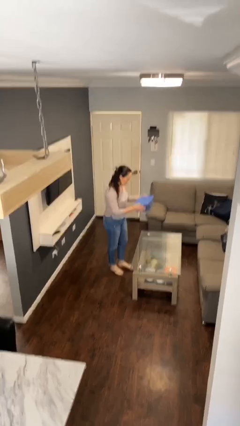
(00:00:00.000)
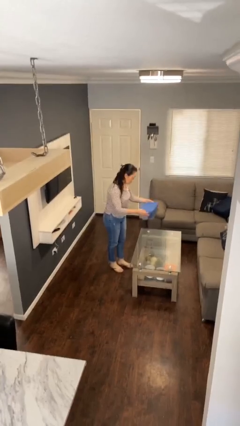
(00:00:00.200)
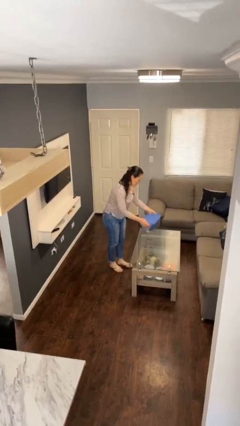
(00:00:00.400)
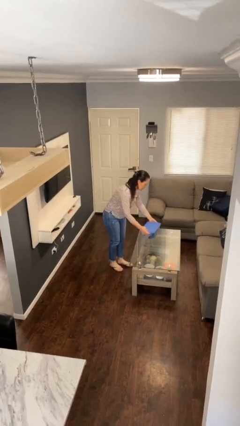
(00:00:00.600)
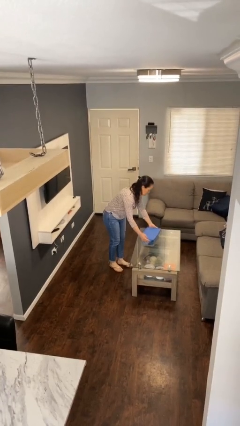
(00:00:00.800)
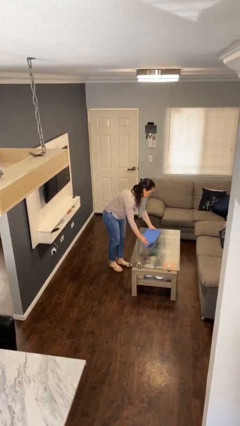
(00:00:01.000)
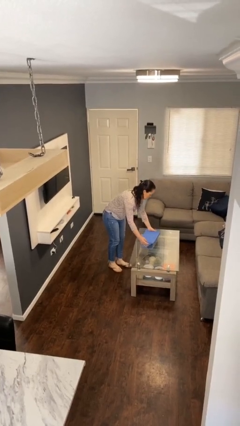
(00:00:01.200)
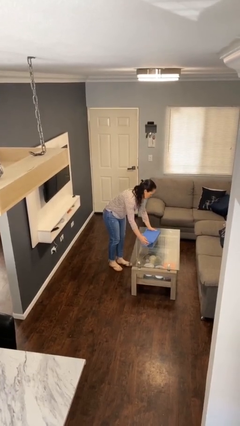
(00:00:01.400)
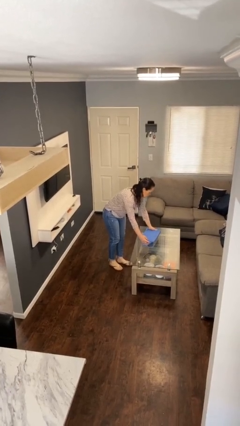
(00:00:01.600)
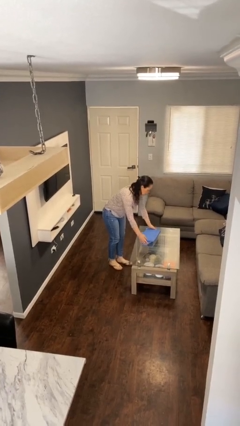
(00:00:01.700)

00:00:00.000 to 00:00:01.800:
person puts down object on table

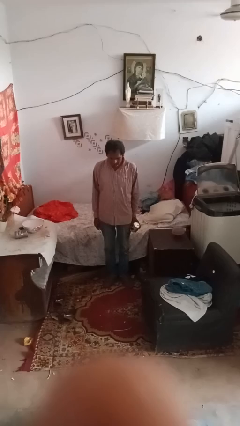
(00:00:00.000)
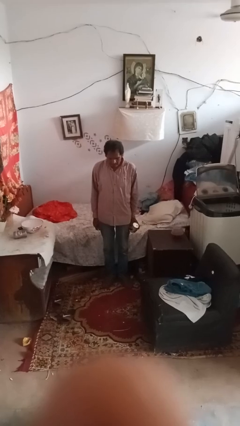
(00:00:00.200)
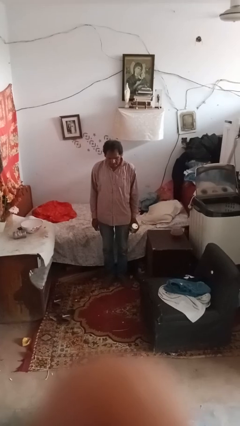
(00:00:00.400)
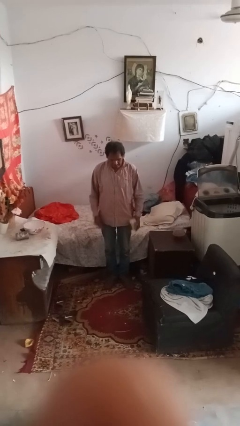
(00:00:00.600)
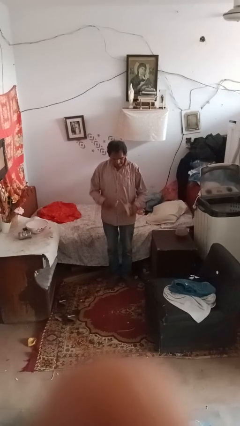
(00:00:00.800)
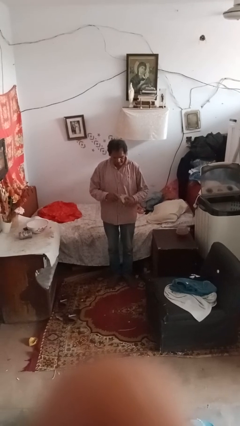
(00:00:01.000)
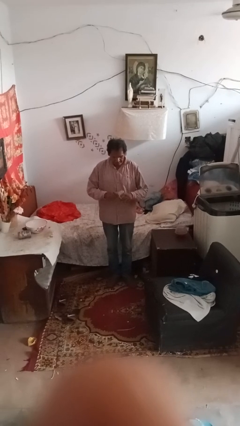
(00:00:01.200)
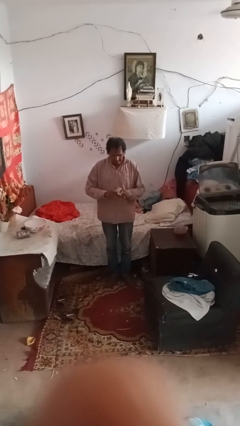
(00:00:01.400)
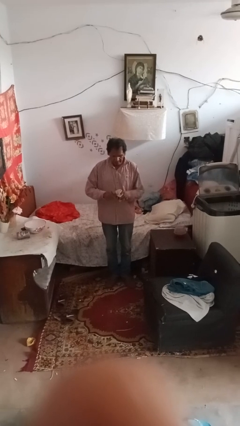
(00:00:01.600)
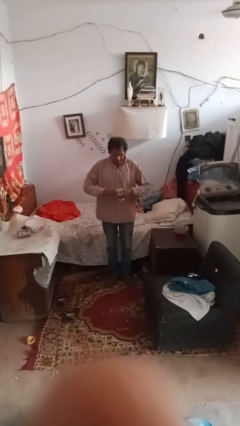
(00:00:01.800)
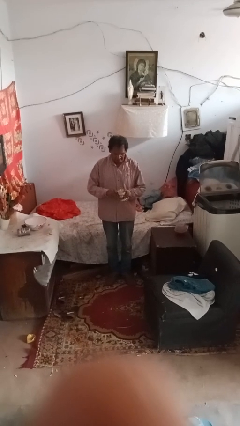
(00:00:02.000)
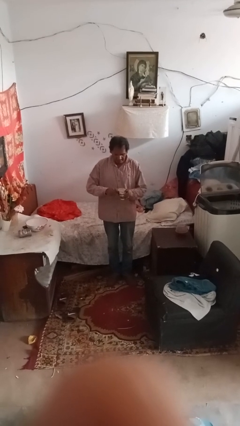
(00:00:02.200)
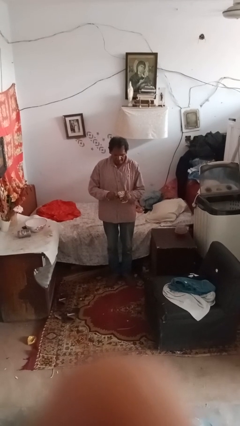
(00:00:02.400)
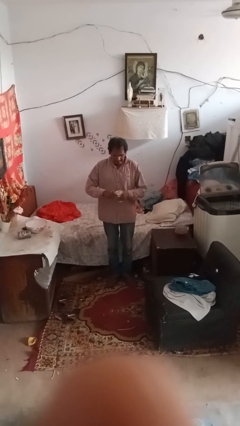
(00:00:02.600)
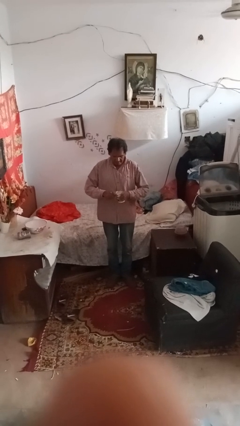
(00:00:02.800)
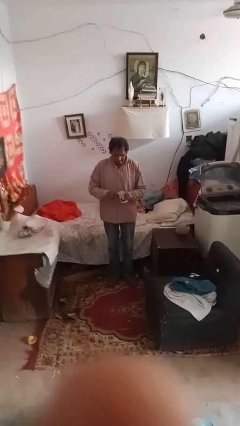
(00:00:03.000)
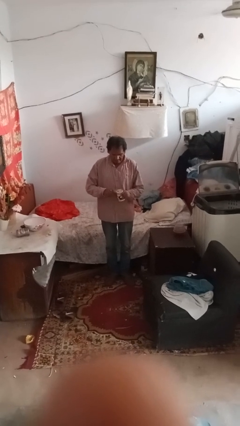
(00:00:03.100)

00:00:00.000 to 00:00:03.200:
person opens can with can opener

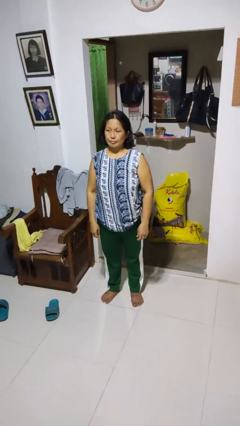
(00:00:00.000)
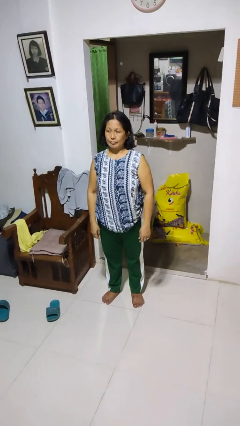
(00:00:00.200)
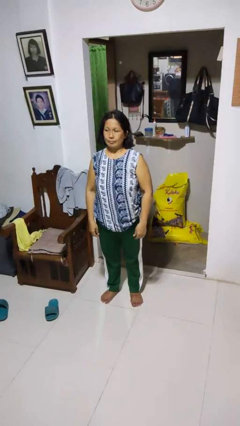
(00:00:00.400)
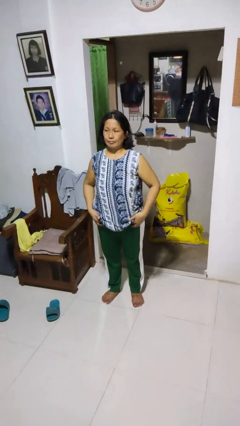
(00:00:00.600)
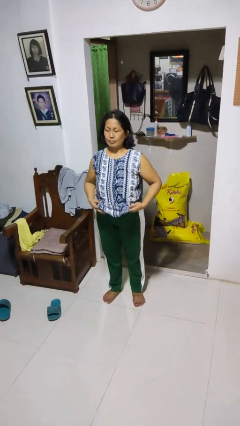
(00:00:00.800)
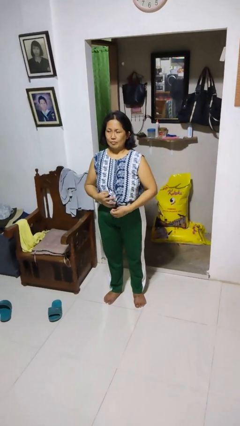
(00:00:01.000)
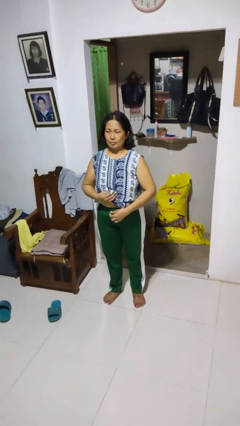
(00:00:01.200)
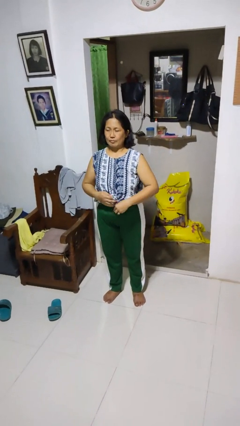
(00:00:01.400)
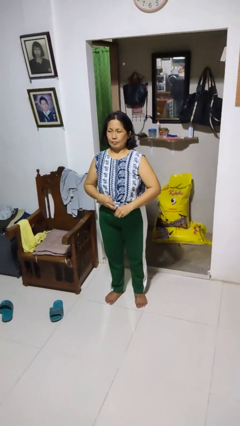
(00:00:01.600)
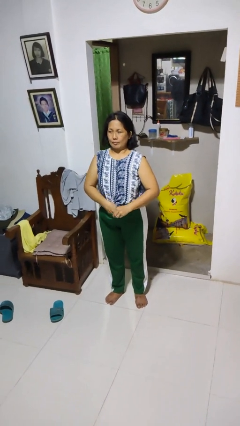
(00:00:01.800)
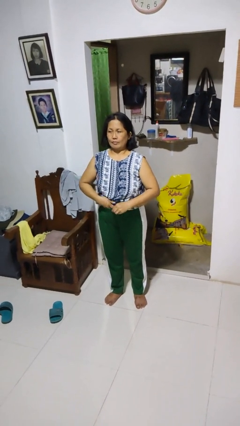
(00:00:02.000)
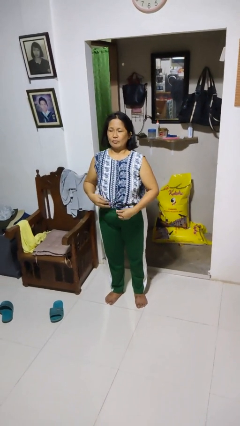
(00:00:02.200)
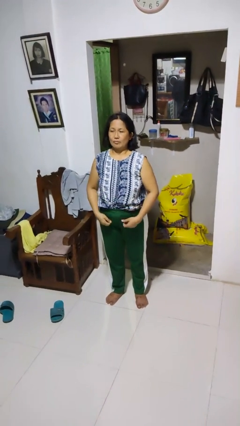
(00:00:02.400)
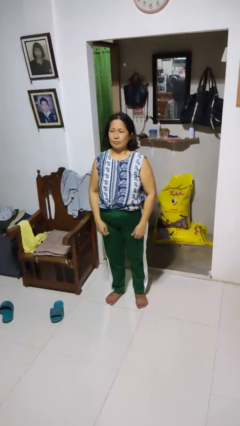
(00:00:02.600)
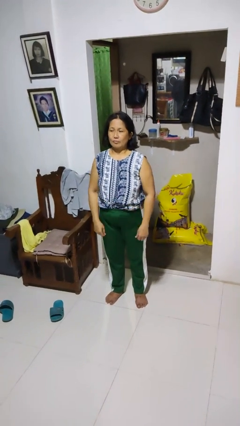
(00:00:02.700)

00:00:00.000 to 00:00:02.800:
person tucks in shirt

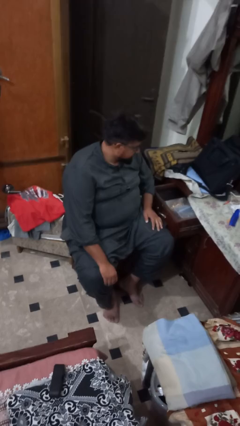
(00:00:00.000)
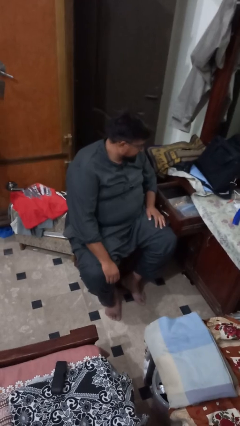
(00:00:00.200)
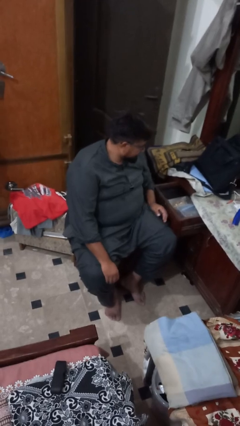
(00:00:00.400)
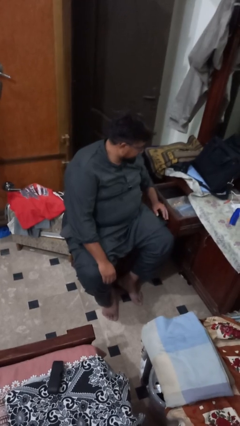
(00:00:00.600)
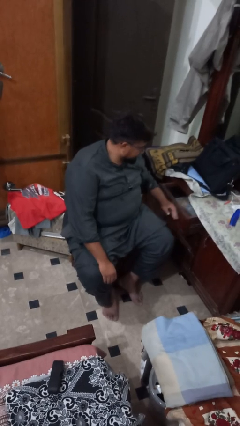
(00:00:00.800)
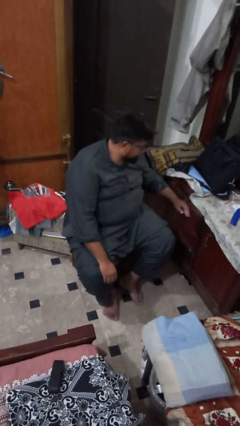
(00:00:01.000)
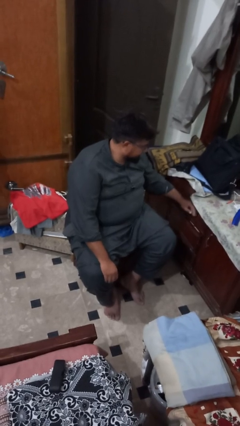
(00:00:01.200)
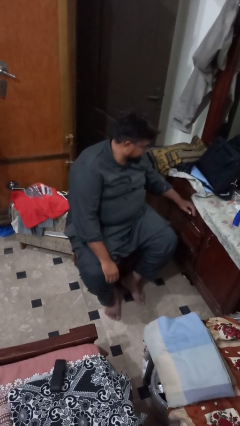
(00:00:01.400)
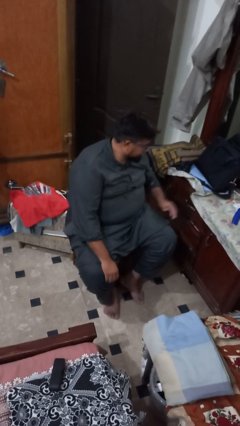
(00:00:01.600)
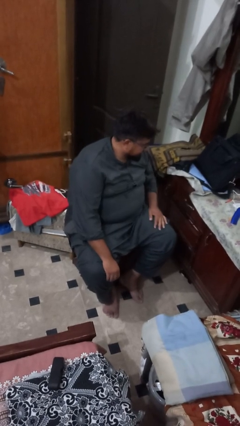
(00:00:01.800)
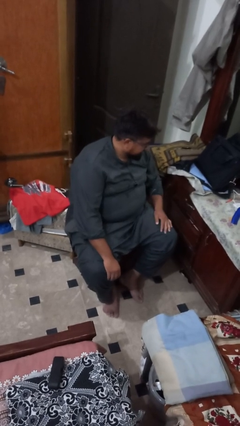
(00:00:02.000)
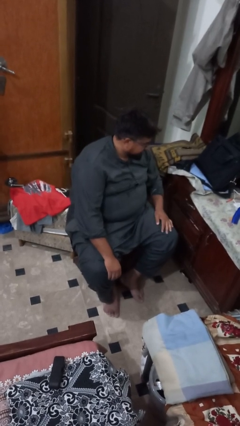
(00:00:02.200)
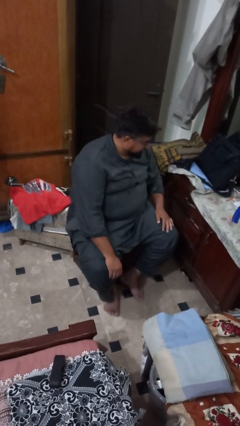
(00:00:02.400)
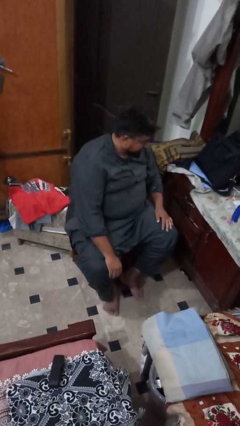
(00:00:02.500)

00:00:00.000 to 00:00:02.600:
person closes dresser drawer

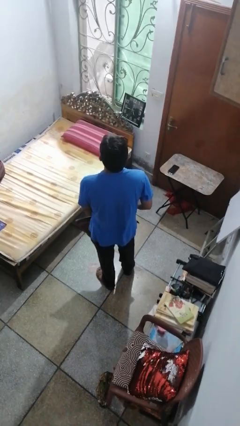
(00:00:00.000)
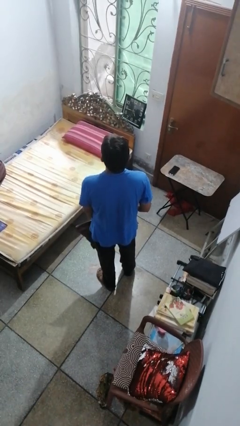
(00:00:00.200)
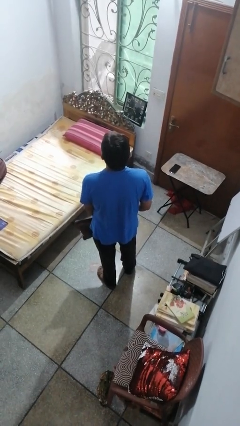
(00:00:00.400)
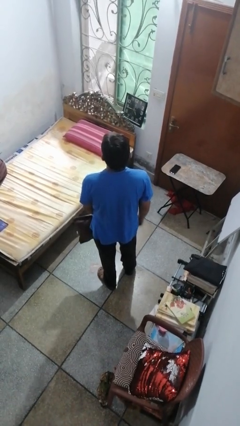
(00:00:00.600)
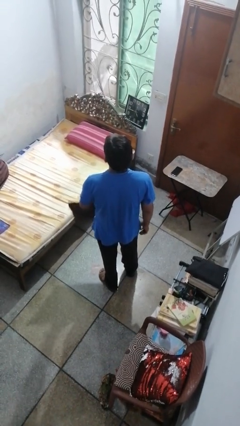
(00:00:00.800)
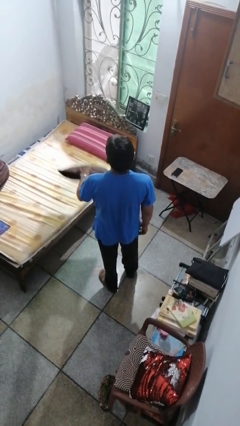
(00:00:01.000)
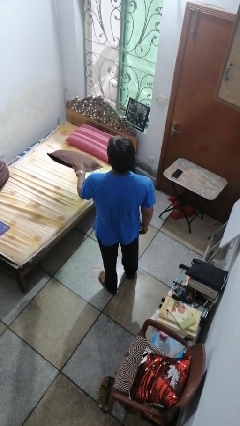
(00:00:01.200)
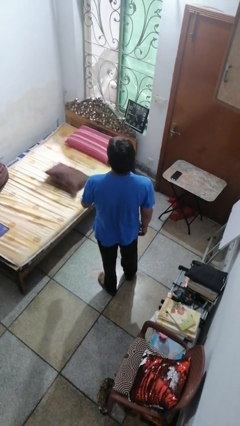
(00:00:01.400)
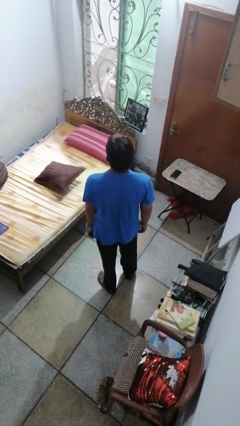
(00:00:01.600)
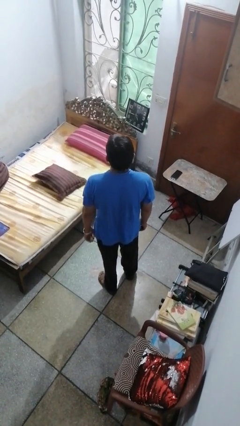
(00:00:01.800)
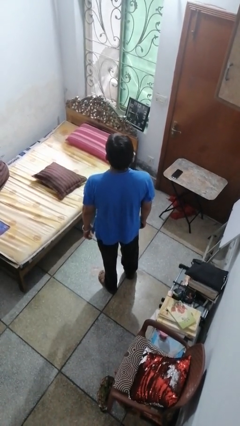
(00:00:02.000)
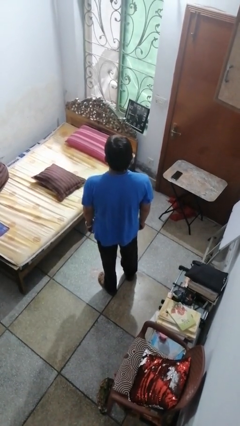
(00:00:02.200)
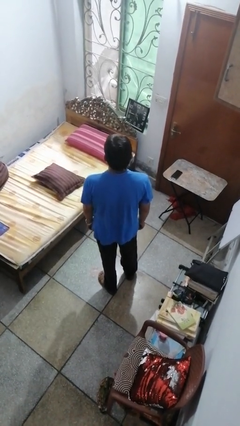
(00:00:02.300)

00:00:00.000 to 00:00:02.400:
person throws object on bed

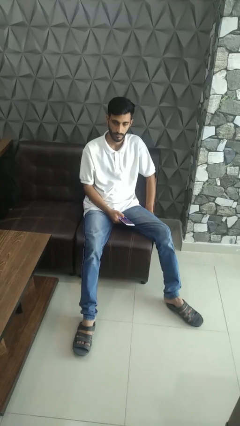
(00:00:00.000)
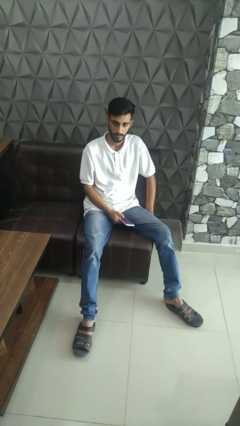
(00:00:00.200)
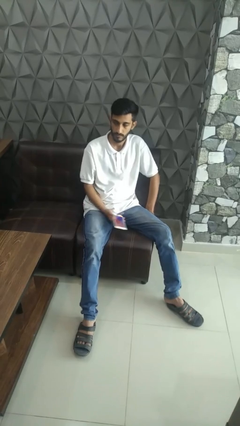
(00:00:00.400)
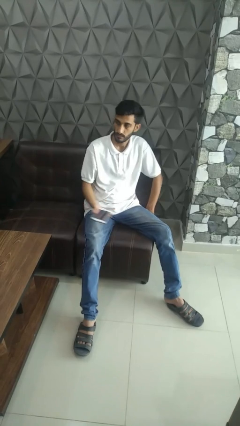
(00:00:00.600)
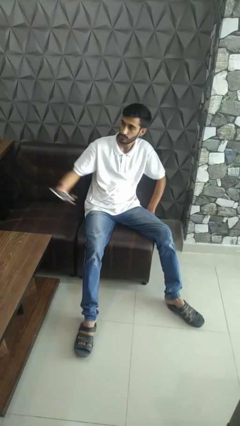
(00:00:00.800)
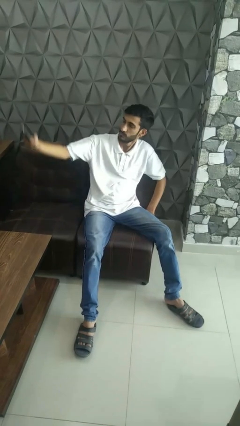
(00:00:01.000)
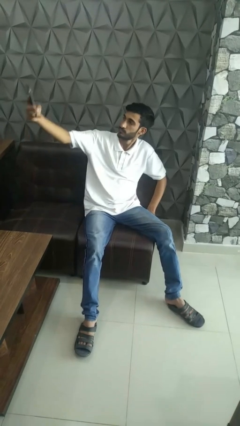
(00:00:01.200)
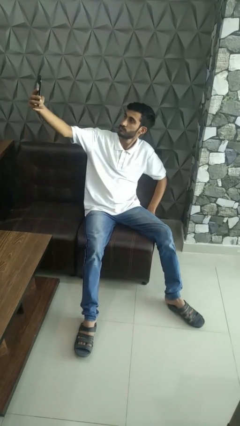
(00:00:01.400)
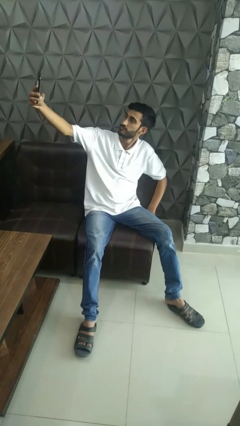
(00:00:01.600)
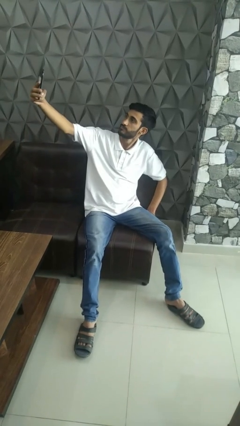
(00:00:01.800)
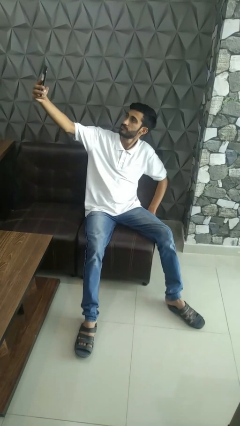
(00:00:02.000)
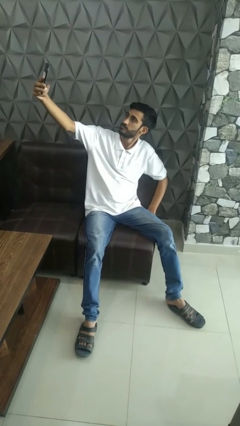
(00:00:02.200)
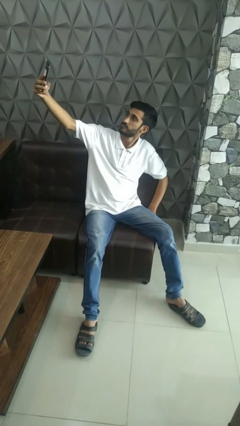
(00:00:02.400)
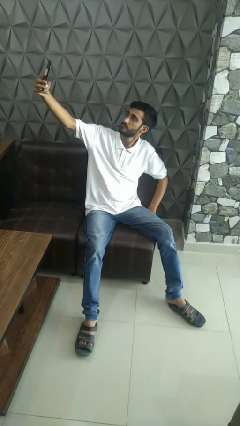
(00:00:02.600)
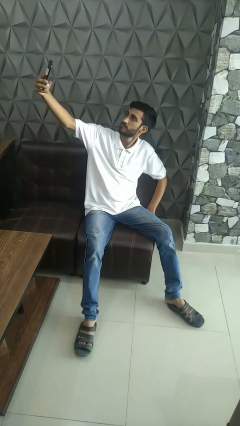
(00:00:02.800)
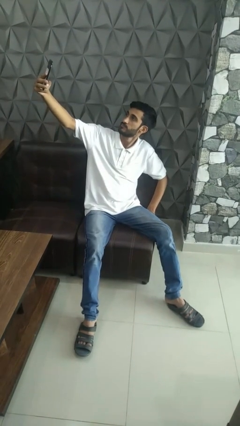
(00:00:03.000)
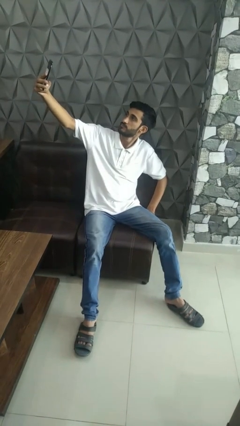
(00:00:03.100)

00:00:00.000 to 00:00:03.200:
person takes selfie

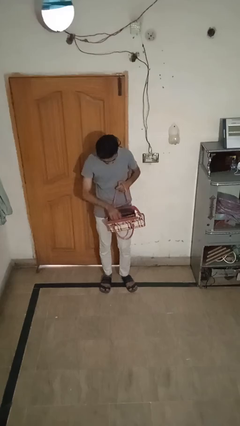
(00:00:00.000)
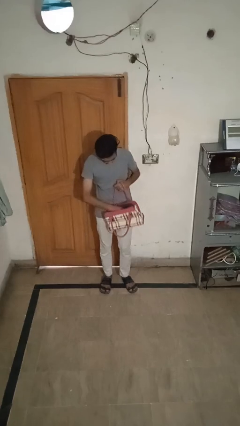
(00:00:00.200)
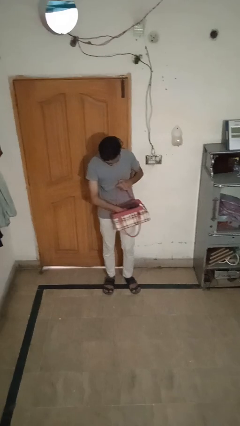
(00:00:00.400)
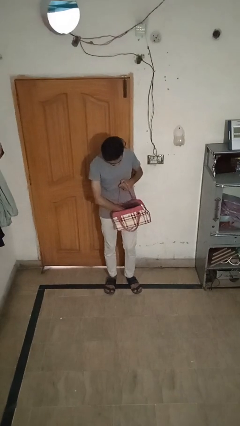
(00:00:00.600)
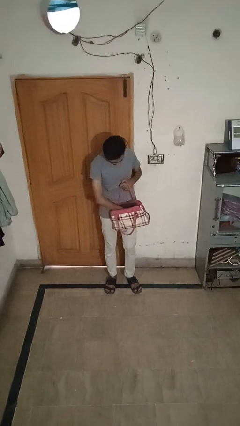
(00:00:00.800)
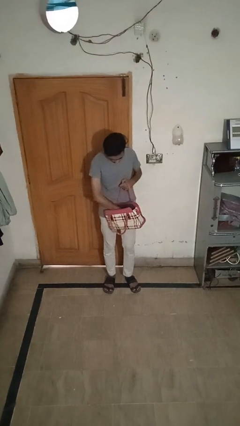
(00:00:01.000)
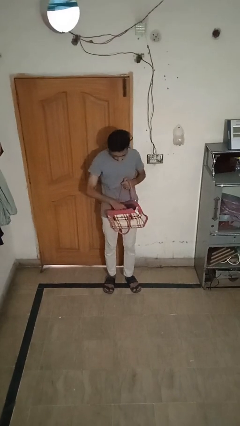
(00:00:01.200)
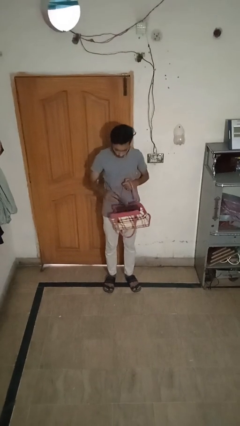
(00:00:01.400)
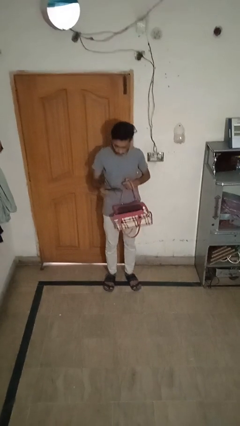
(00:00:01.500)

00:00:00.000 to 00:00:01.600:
person takes object from purse
